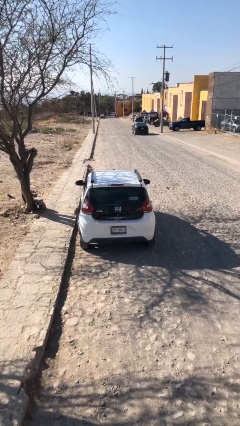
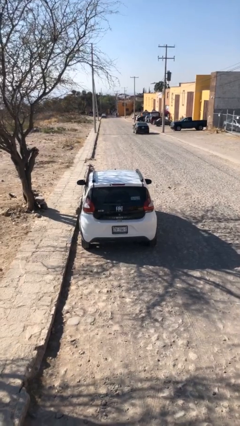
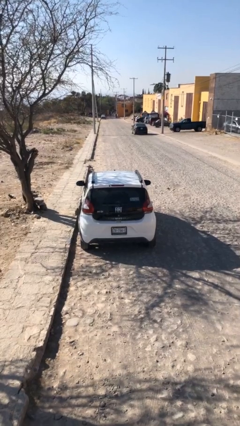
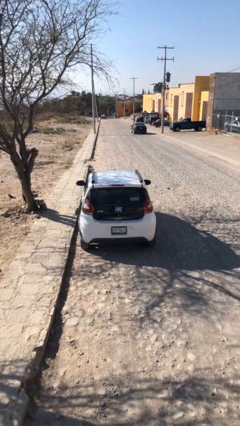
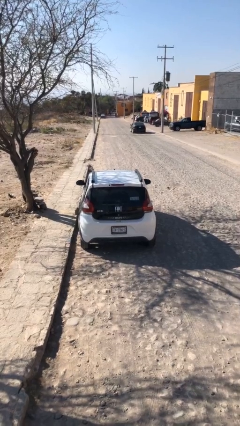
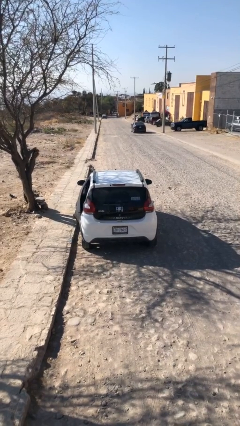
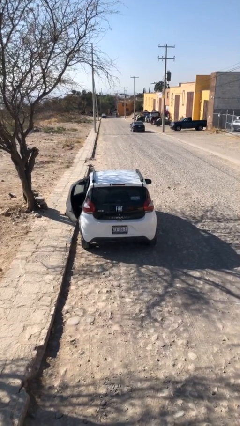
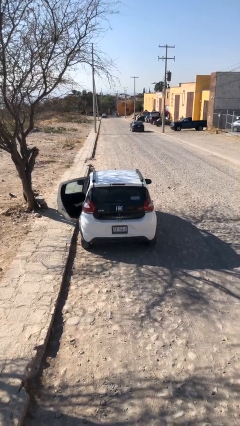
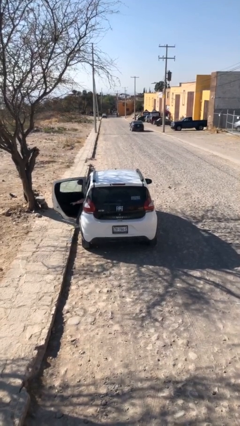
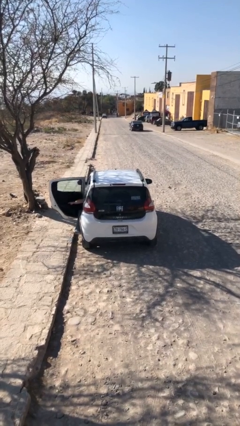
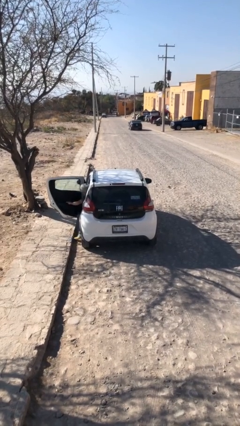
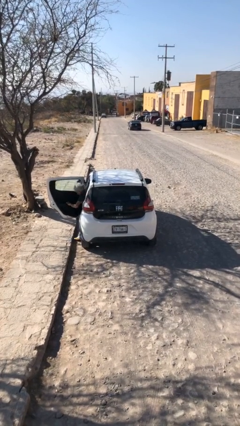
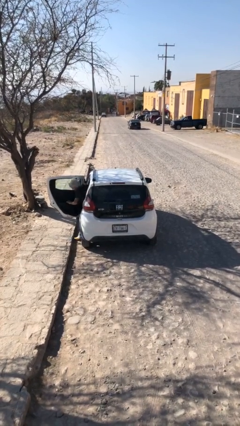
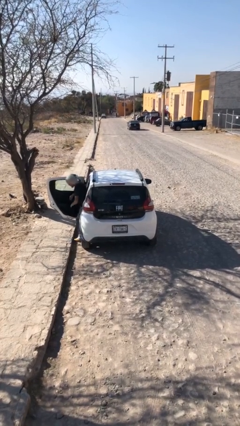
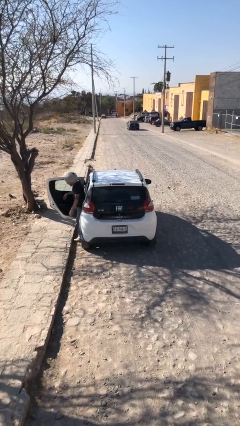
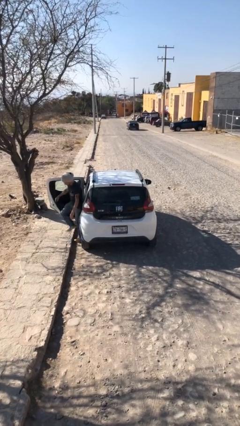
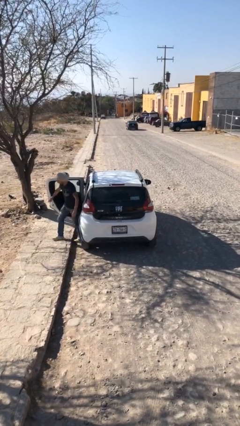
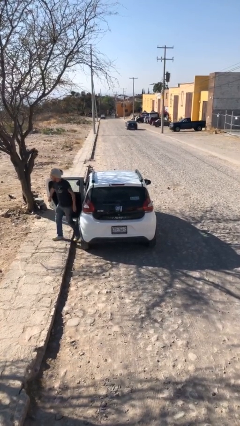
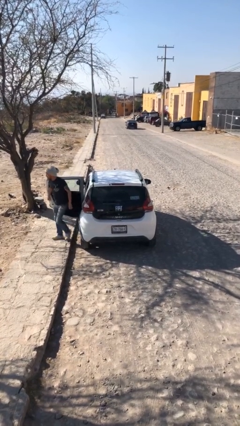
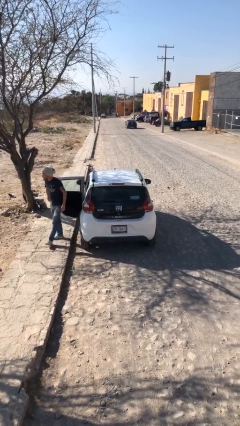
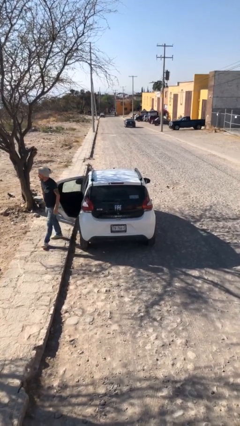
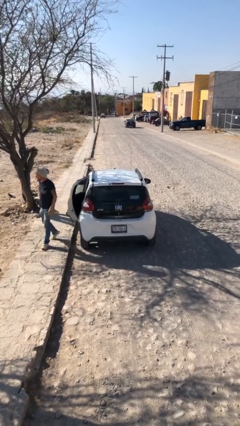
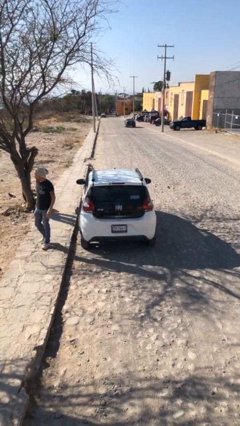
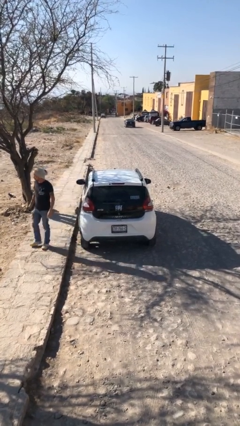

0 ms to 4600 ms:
car drops off person

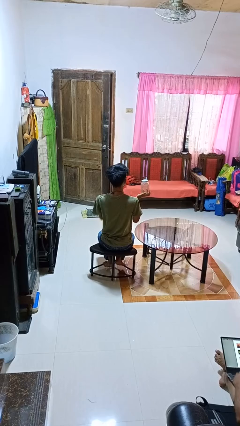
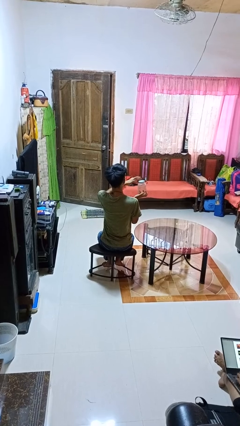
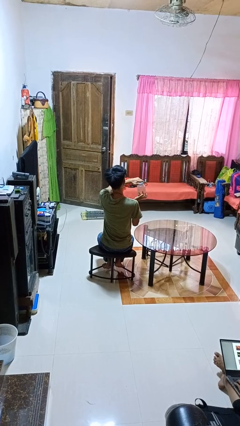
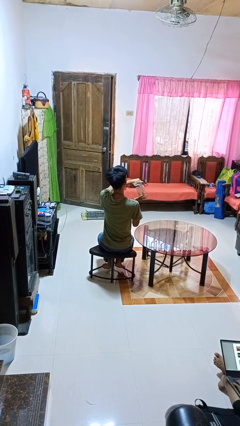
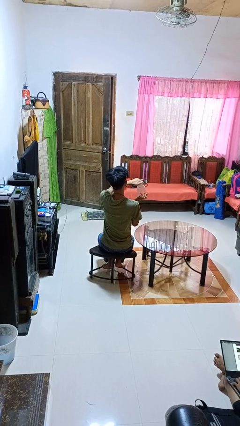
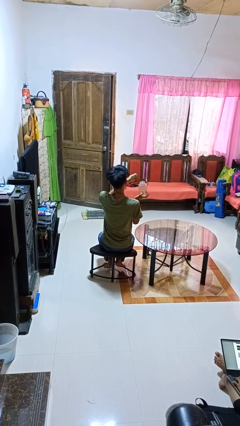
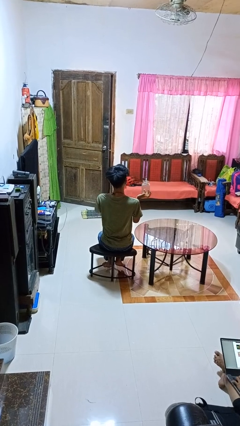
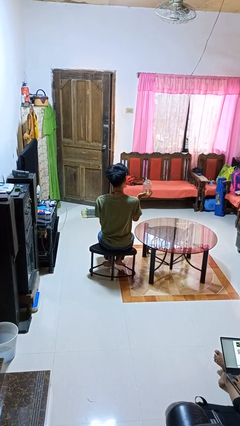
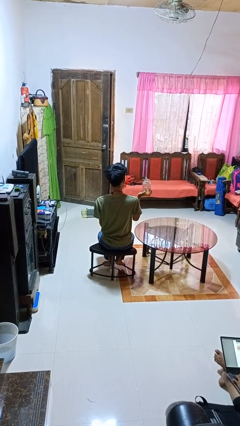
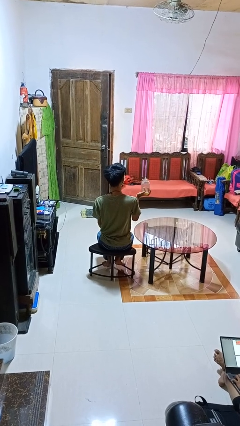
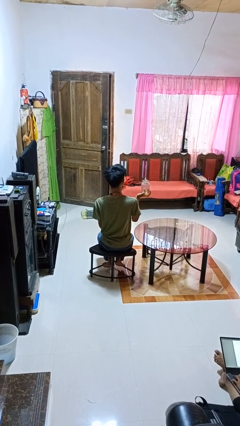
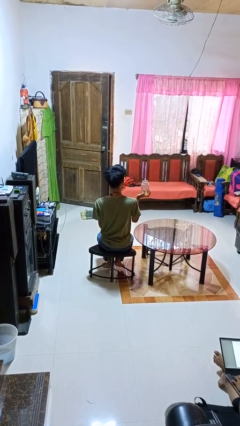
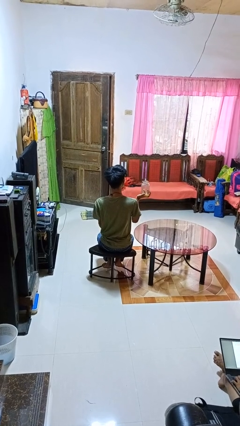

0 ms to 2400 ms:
person opens jar

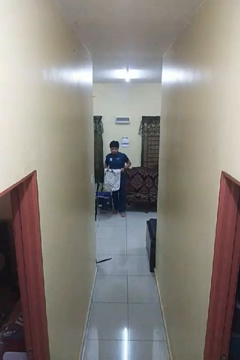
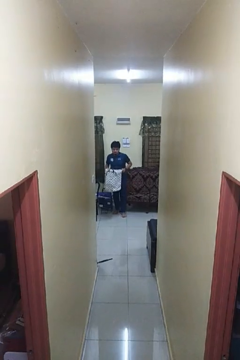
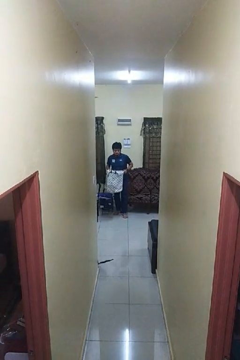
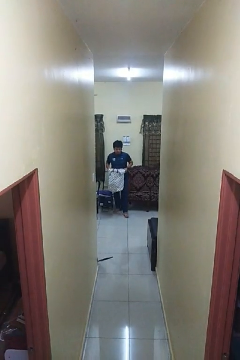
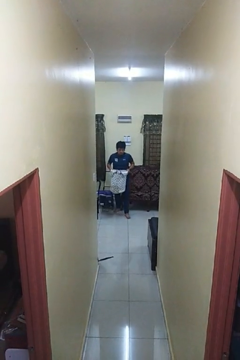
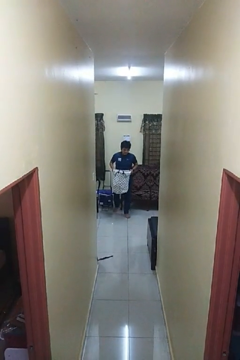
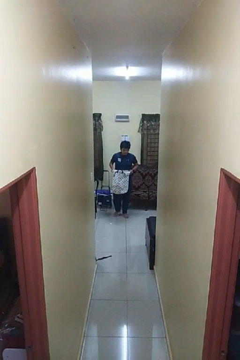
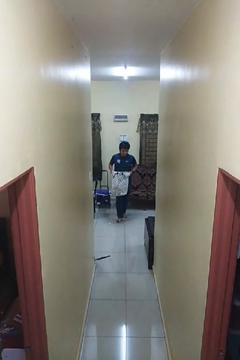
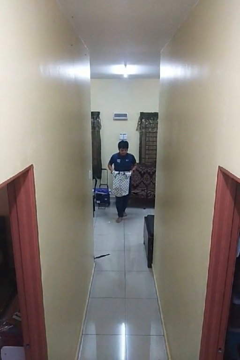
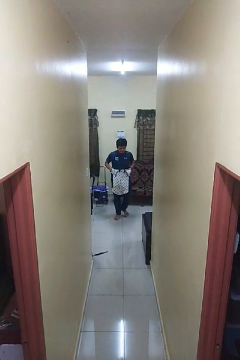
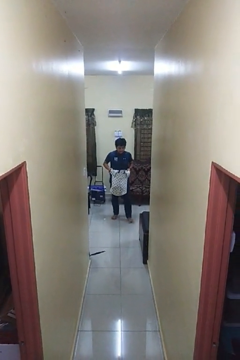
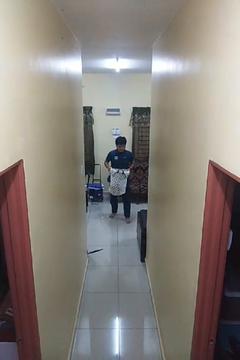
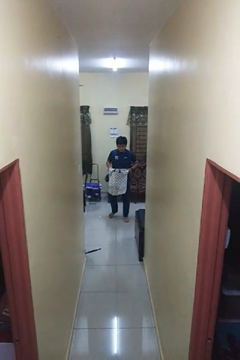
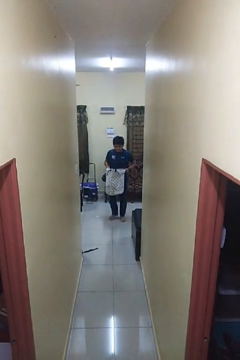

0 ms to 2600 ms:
person carries laundry basket

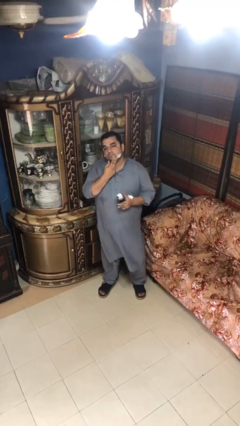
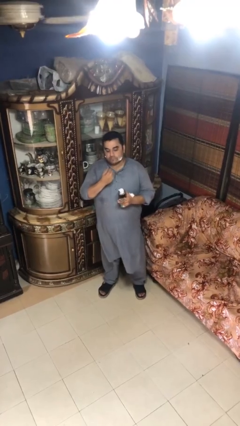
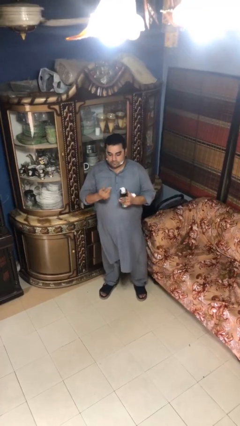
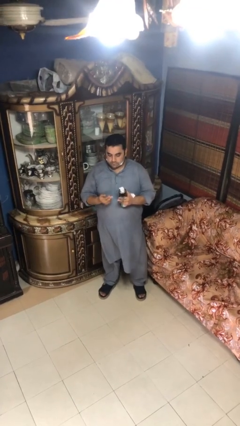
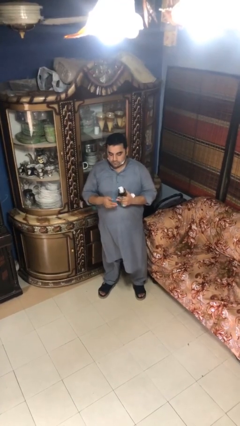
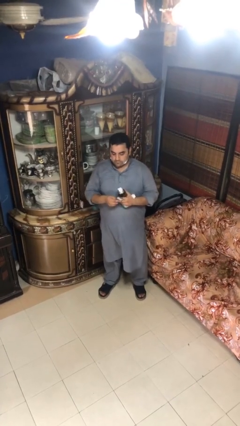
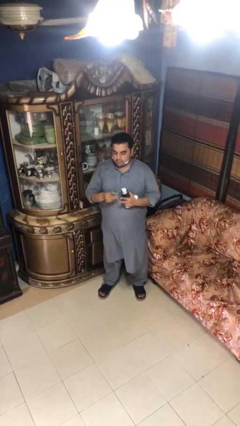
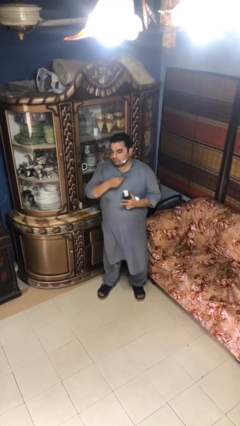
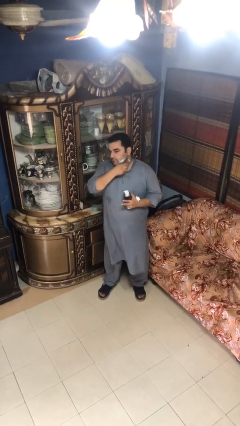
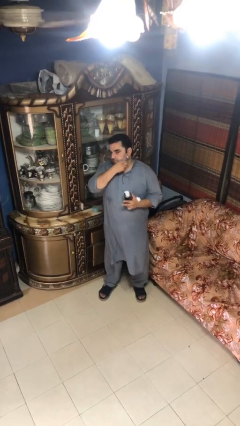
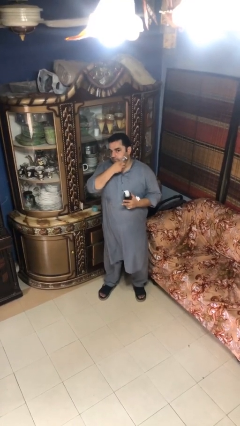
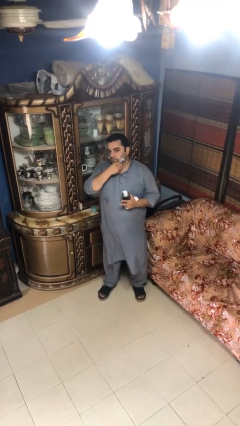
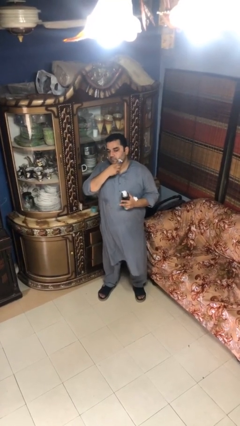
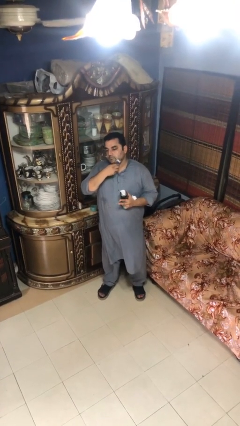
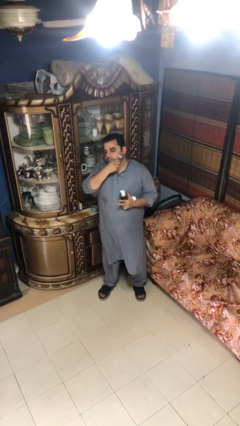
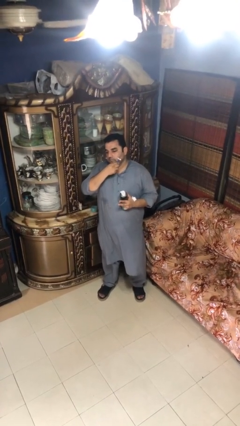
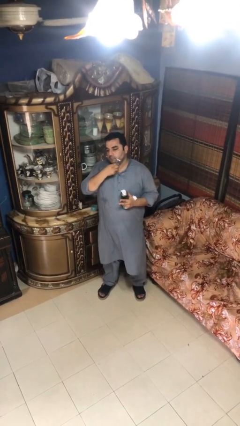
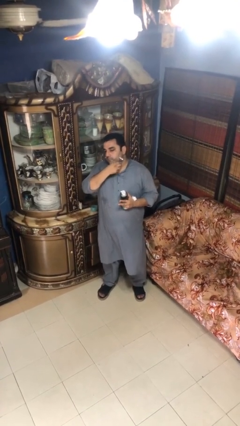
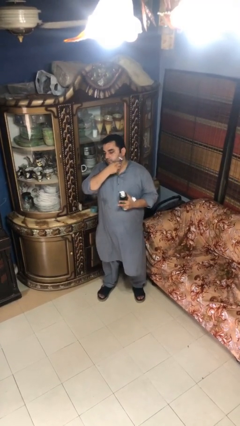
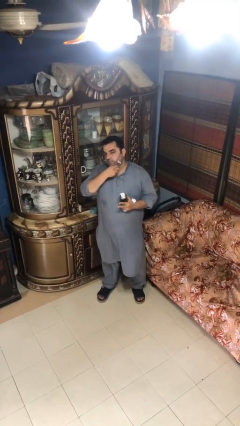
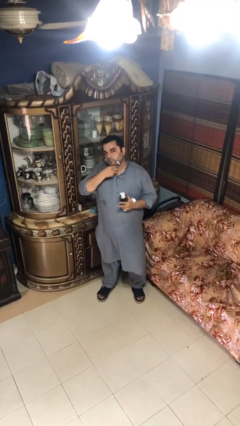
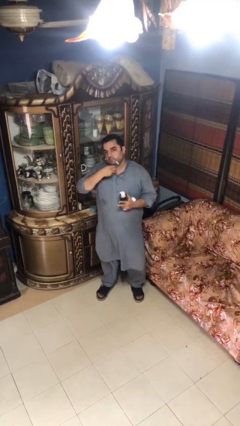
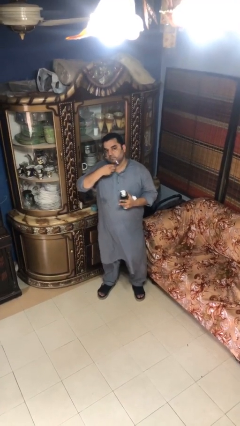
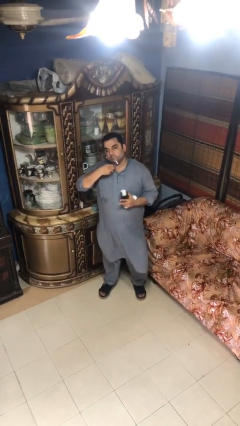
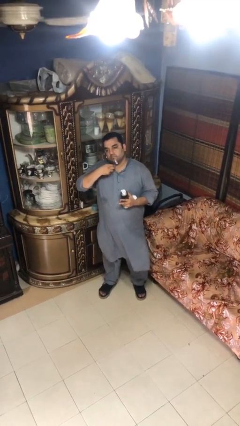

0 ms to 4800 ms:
person shaves face

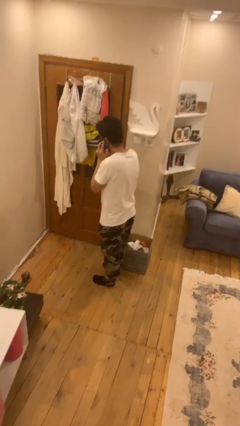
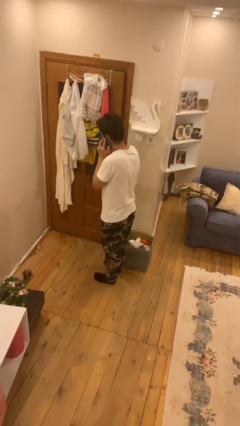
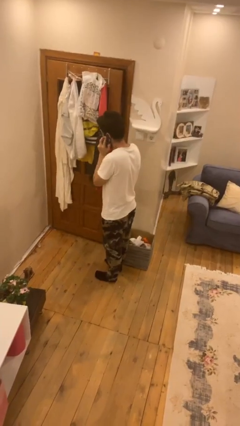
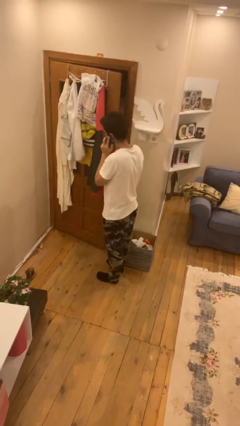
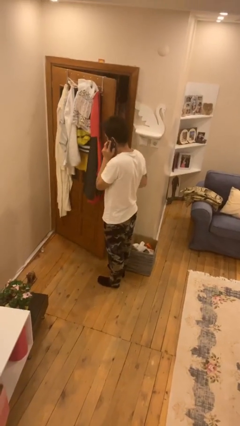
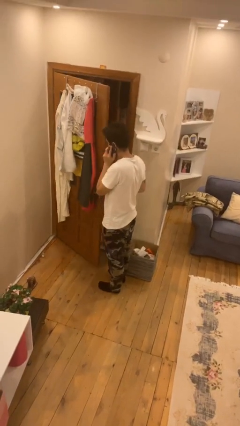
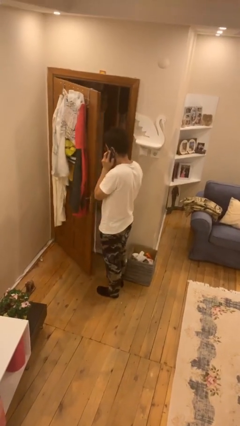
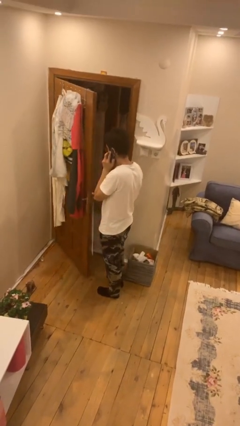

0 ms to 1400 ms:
person opens facility door

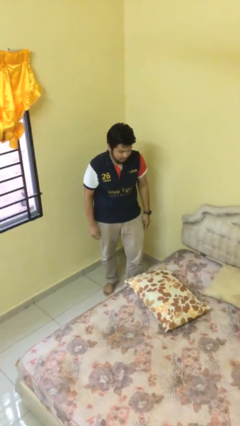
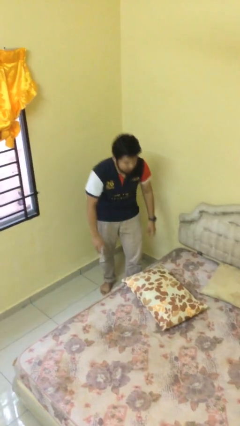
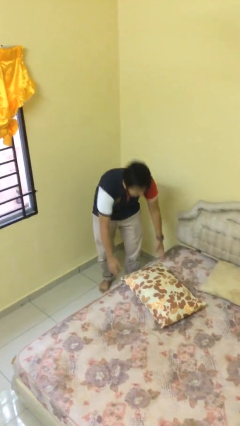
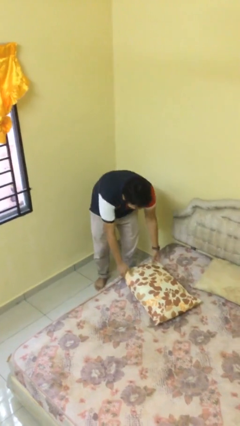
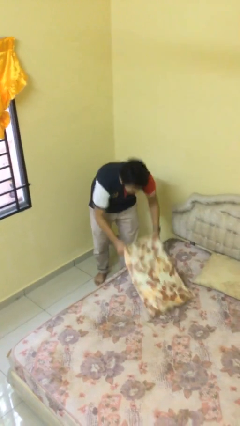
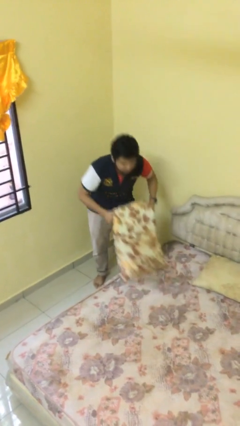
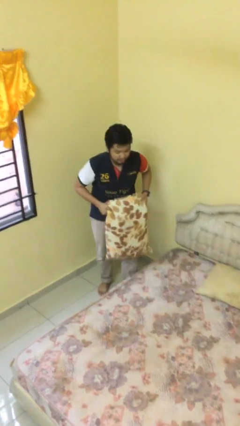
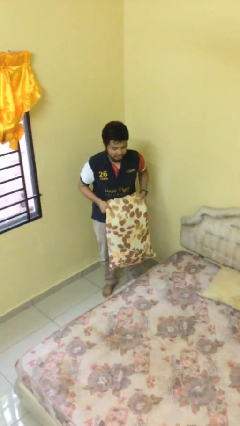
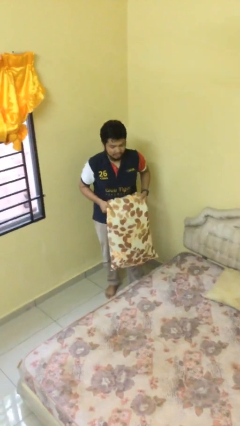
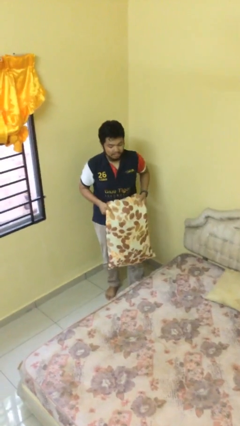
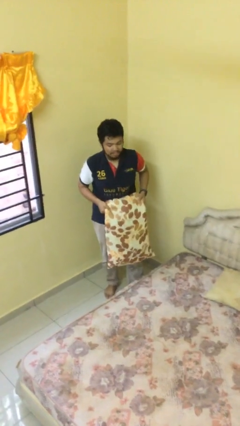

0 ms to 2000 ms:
person picks up object from bed
